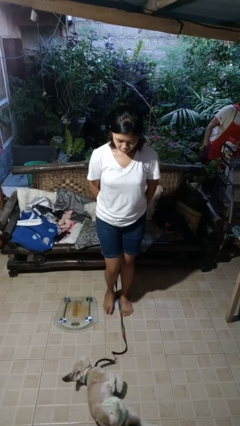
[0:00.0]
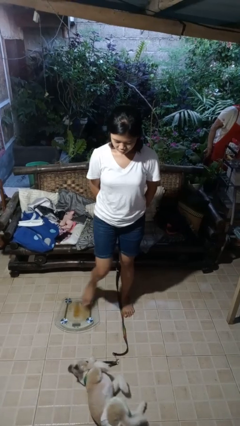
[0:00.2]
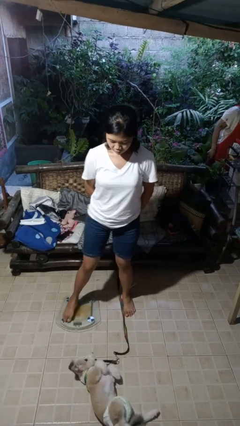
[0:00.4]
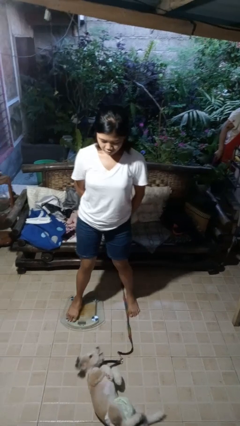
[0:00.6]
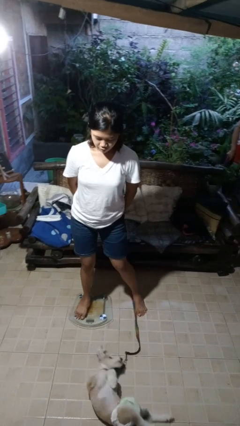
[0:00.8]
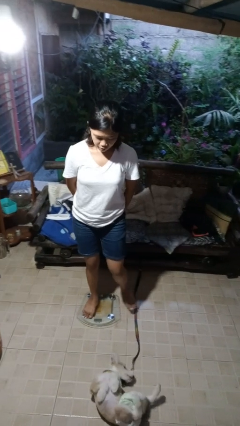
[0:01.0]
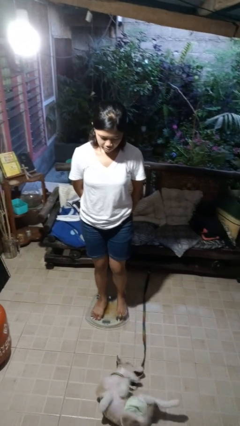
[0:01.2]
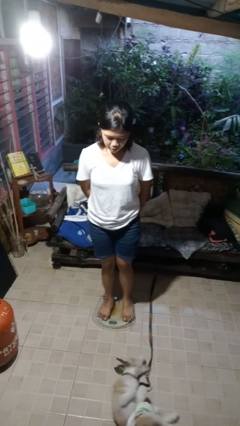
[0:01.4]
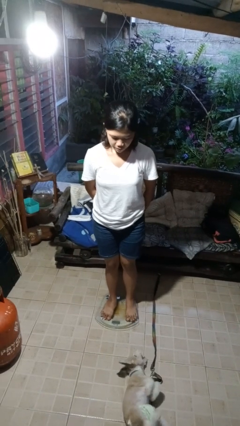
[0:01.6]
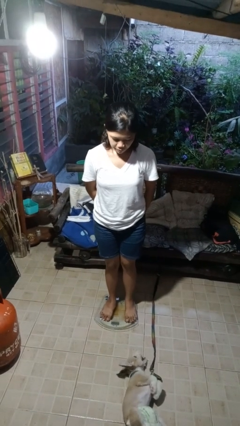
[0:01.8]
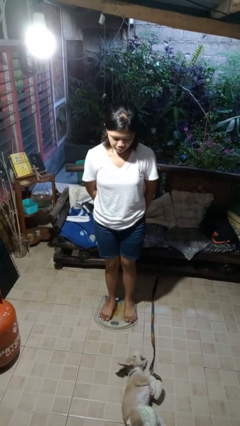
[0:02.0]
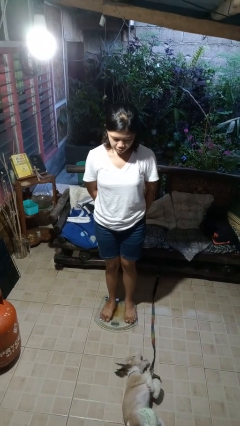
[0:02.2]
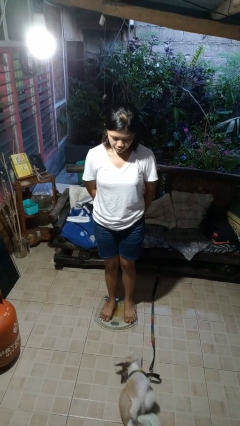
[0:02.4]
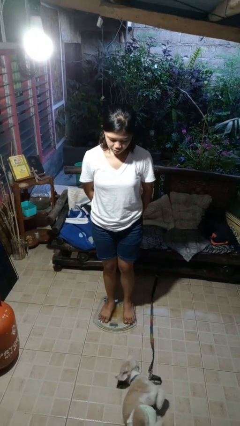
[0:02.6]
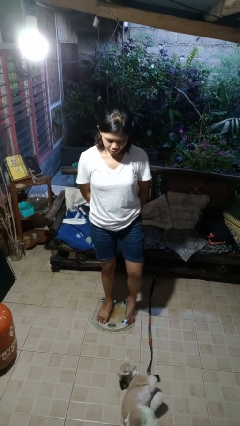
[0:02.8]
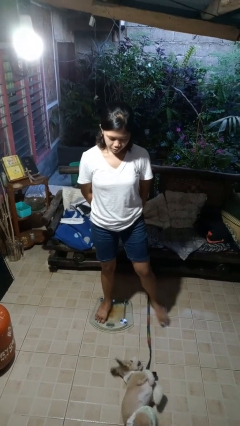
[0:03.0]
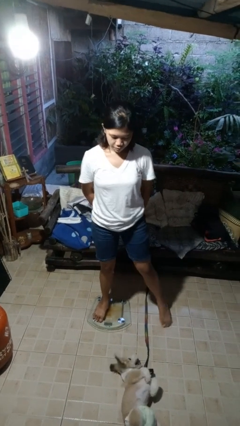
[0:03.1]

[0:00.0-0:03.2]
person uses bodyweight scale

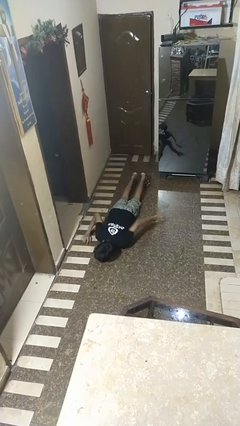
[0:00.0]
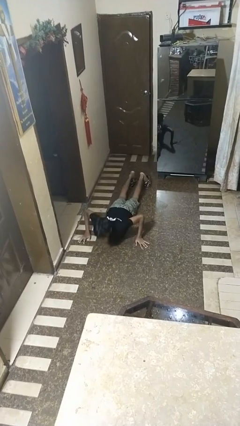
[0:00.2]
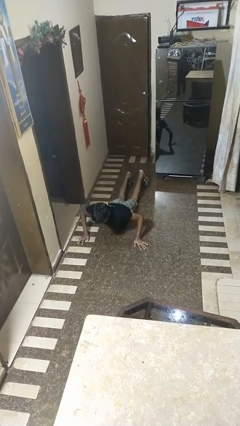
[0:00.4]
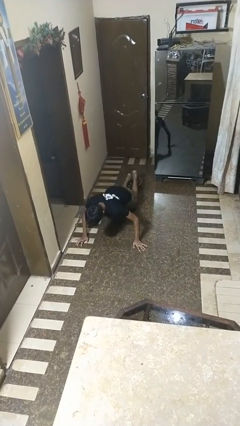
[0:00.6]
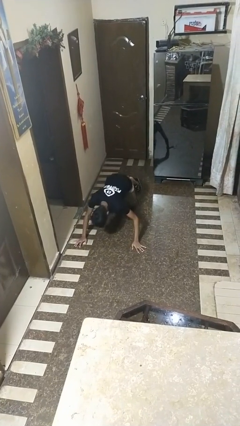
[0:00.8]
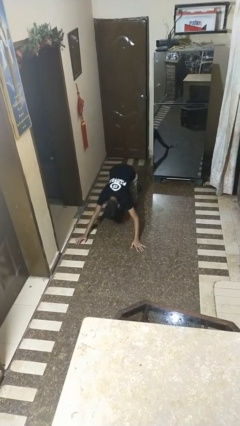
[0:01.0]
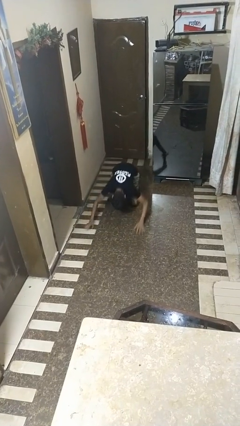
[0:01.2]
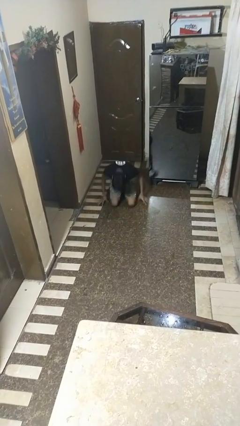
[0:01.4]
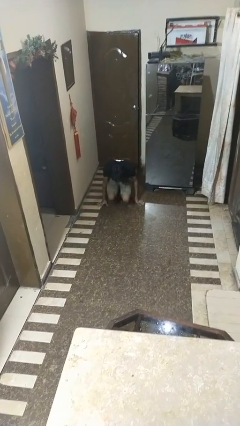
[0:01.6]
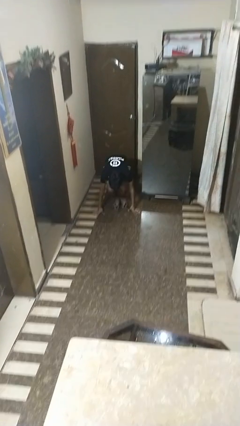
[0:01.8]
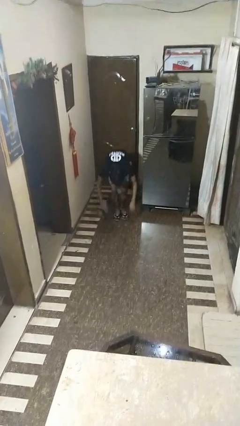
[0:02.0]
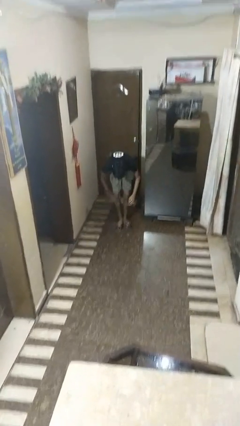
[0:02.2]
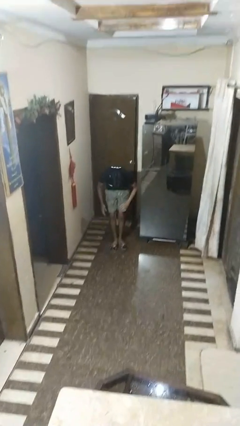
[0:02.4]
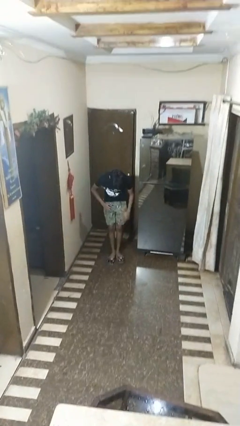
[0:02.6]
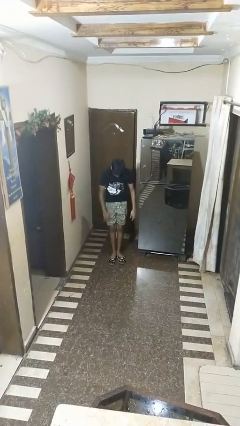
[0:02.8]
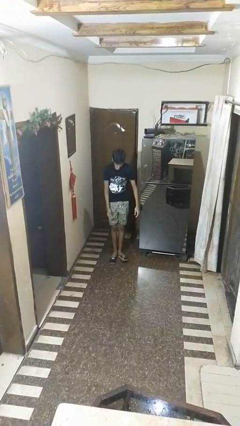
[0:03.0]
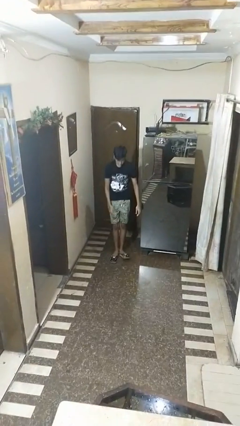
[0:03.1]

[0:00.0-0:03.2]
person stands up from floor

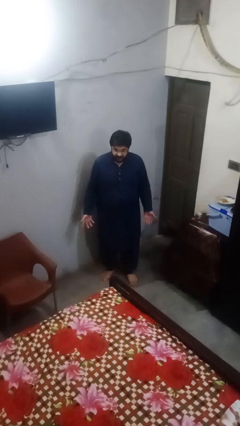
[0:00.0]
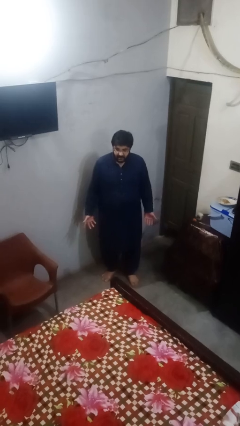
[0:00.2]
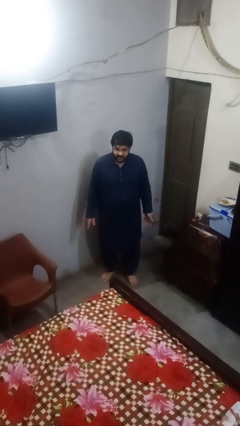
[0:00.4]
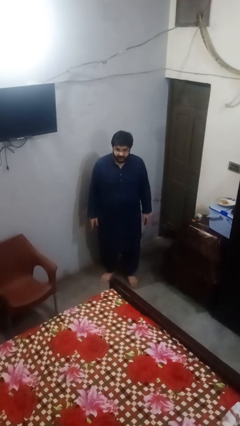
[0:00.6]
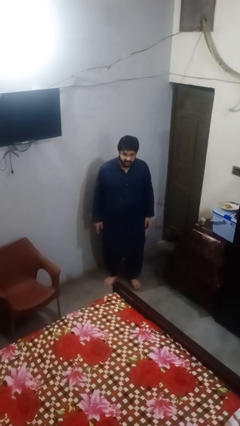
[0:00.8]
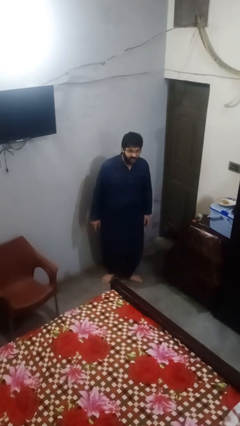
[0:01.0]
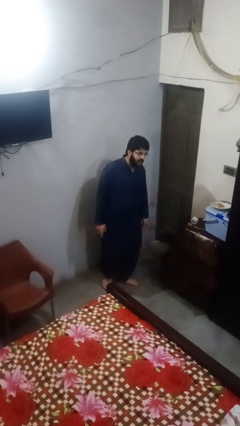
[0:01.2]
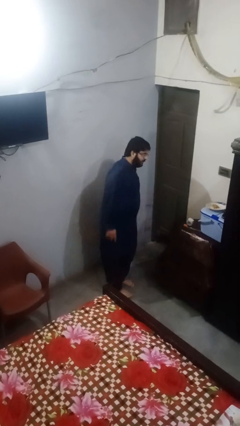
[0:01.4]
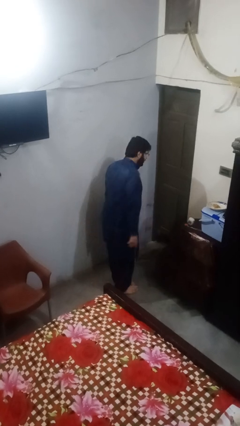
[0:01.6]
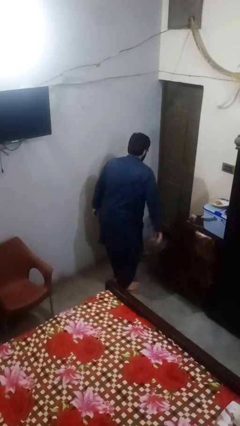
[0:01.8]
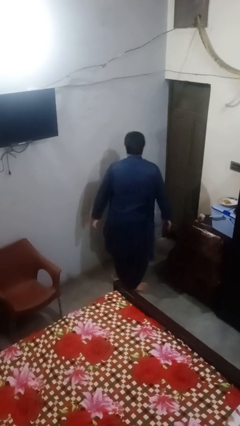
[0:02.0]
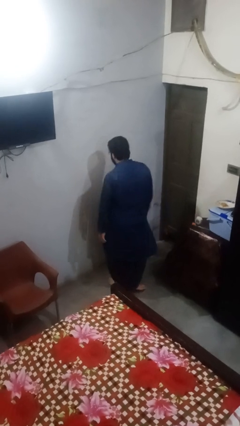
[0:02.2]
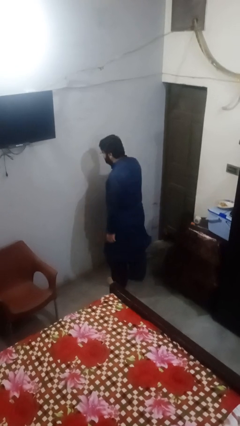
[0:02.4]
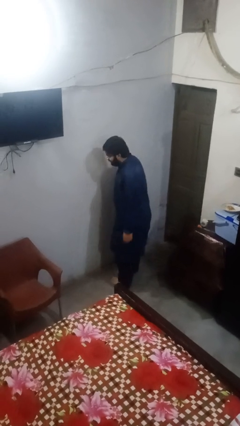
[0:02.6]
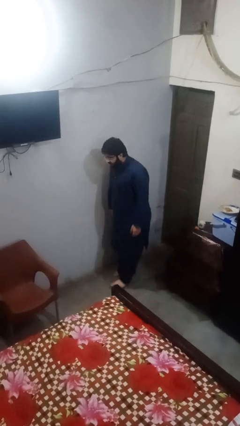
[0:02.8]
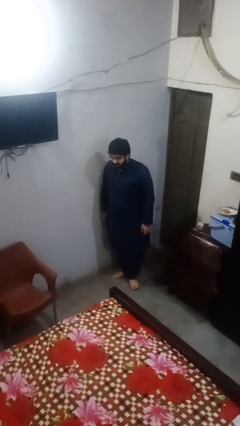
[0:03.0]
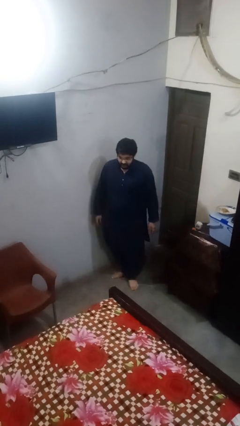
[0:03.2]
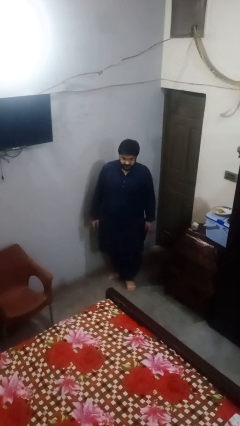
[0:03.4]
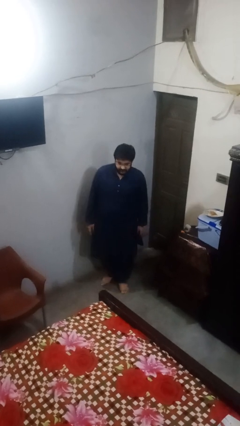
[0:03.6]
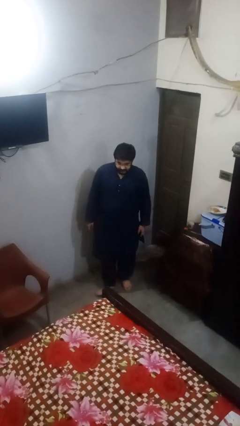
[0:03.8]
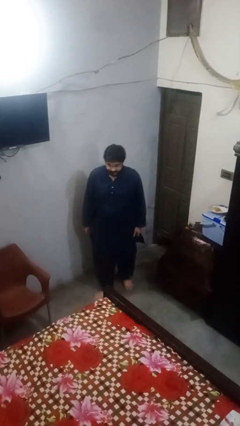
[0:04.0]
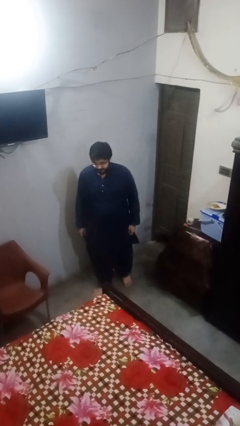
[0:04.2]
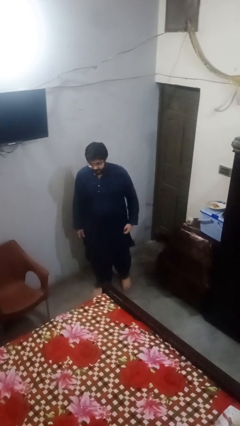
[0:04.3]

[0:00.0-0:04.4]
person twirls

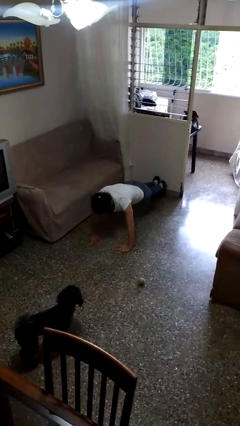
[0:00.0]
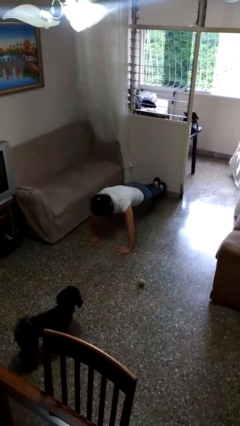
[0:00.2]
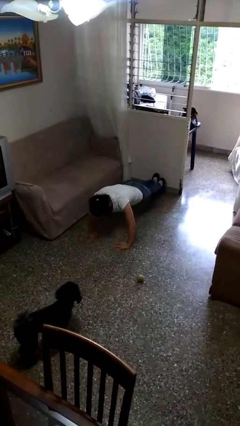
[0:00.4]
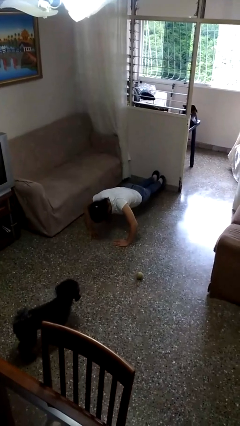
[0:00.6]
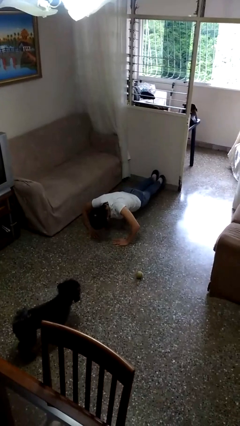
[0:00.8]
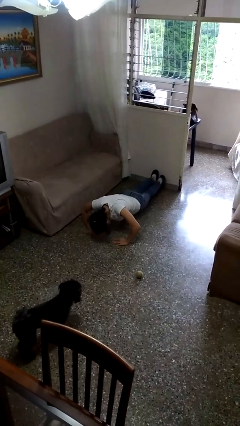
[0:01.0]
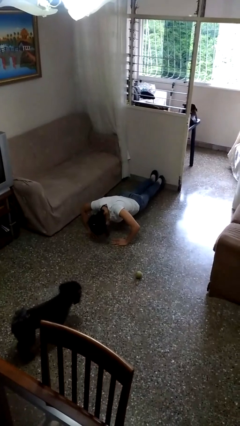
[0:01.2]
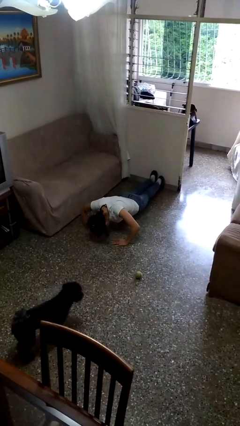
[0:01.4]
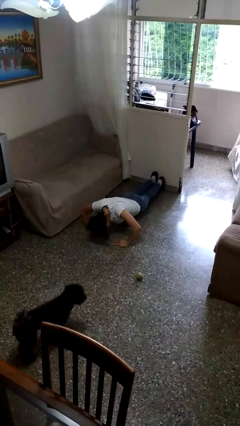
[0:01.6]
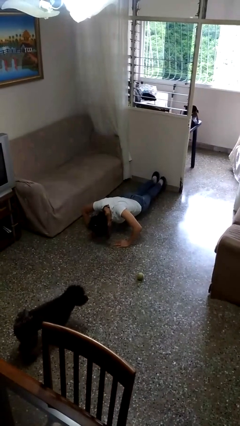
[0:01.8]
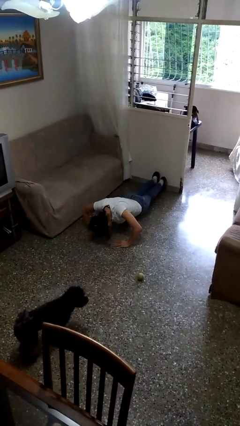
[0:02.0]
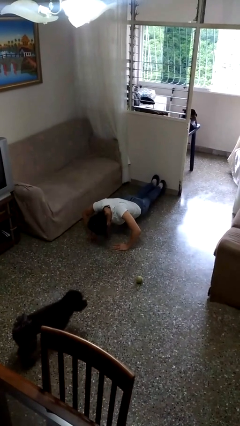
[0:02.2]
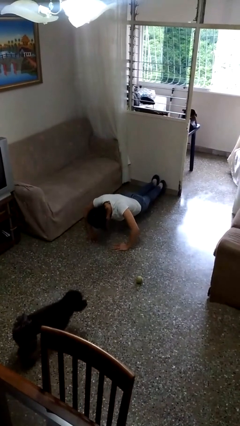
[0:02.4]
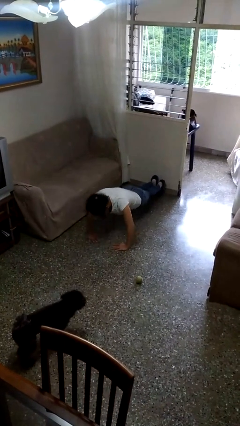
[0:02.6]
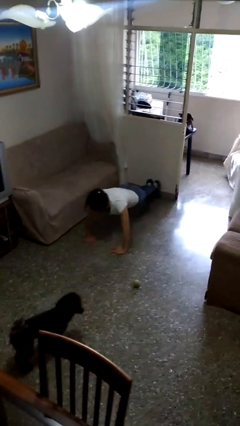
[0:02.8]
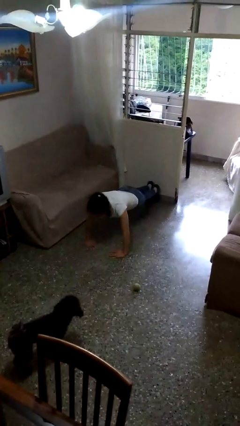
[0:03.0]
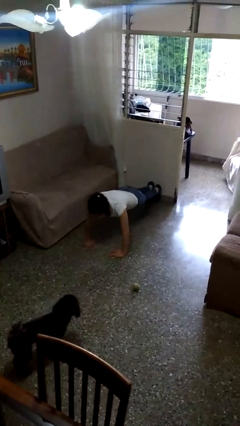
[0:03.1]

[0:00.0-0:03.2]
person exercises with pushup

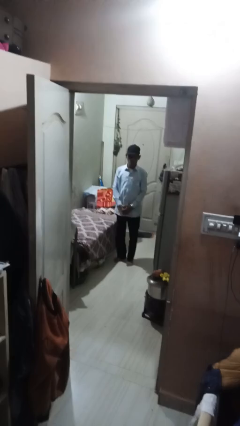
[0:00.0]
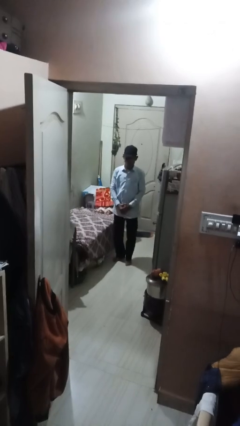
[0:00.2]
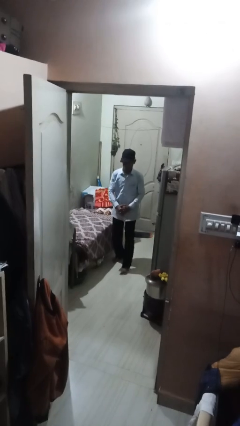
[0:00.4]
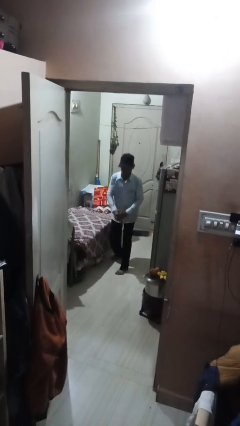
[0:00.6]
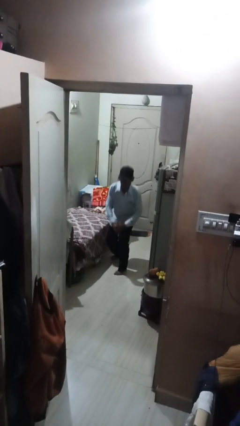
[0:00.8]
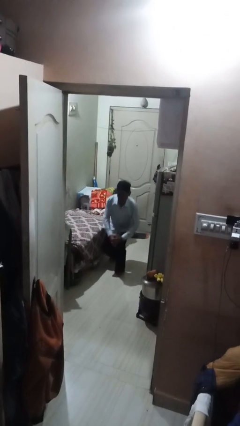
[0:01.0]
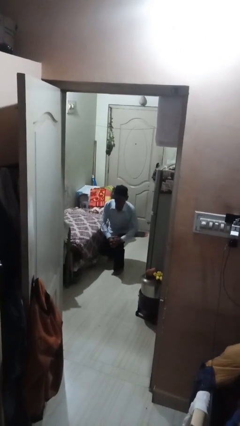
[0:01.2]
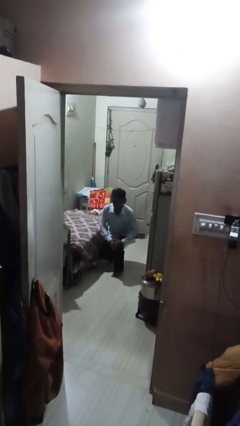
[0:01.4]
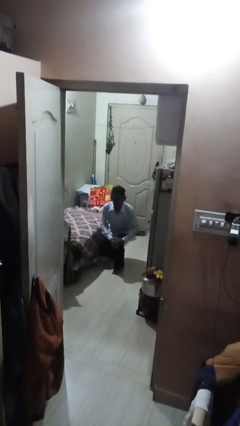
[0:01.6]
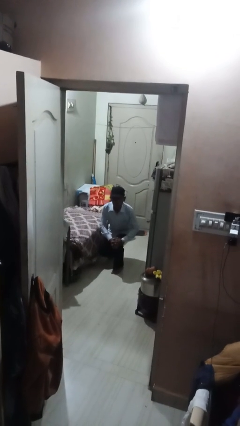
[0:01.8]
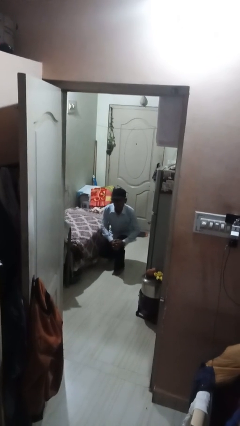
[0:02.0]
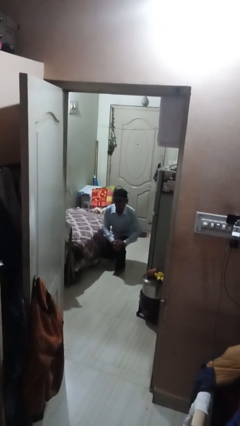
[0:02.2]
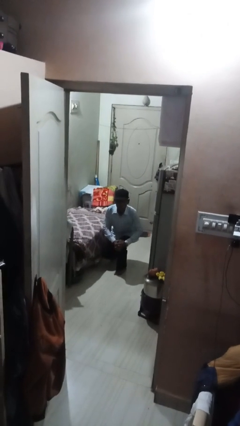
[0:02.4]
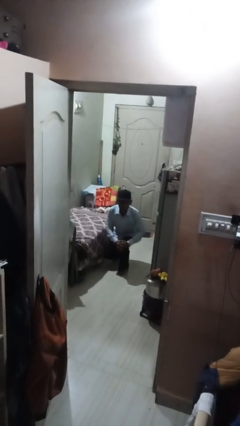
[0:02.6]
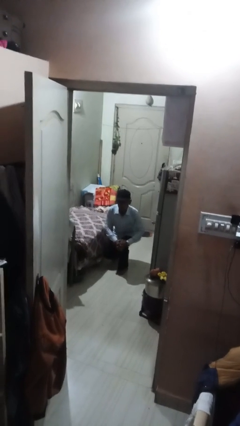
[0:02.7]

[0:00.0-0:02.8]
person exercises with lunges

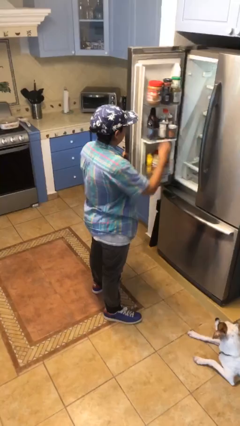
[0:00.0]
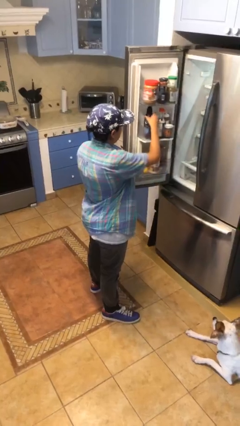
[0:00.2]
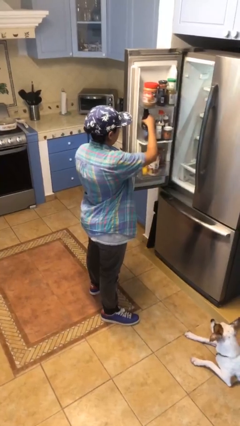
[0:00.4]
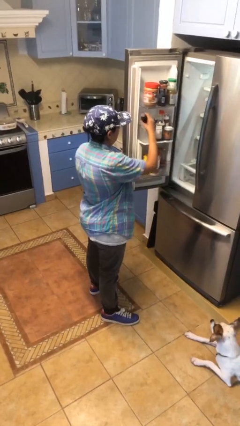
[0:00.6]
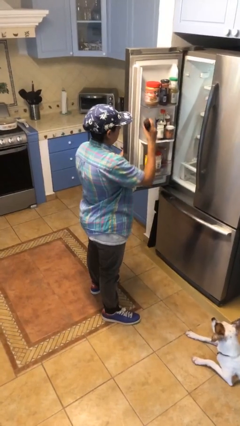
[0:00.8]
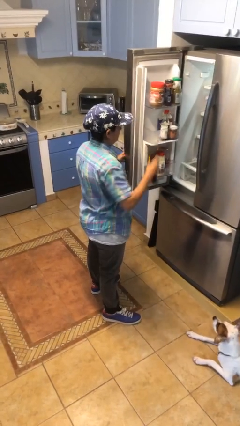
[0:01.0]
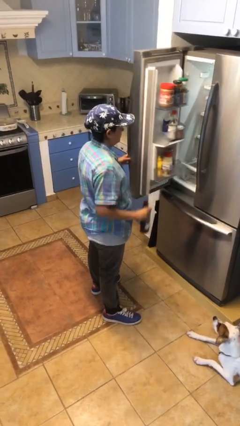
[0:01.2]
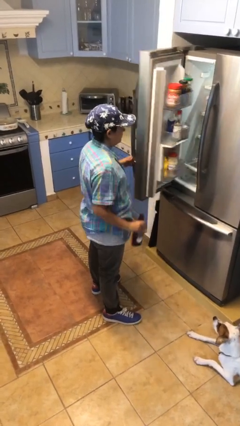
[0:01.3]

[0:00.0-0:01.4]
person takes object from refrigerator
